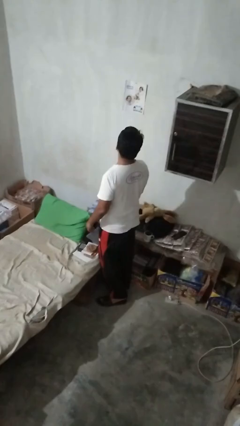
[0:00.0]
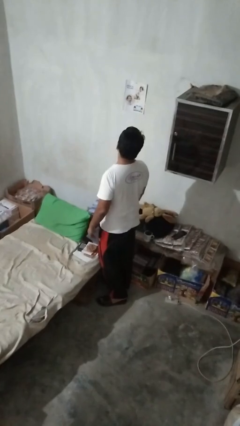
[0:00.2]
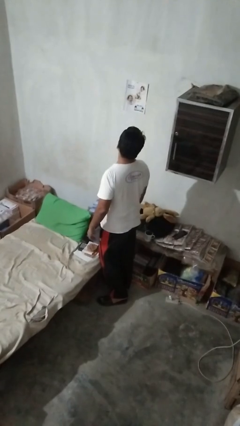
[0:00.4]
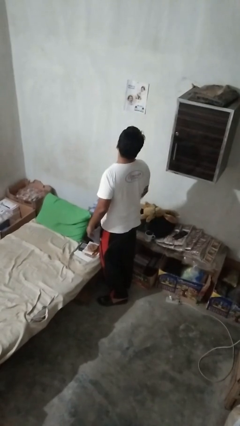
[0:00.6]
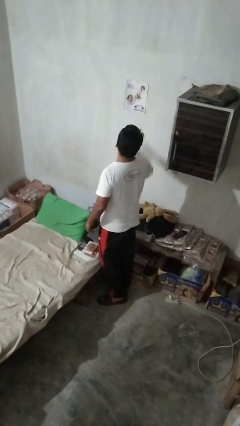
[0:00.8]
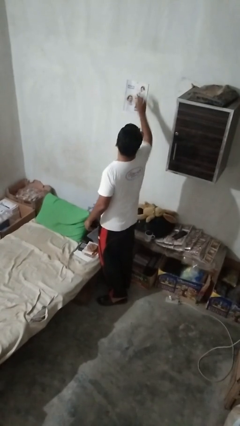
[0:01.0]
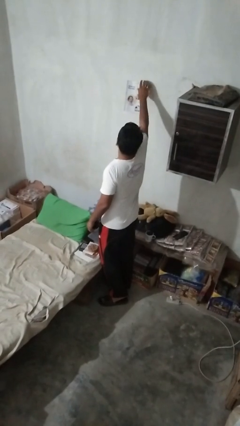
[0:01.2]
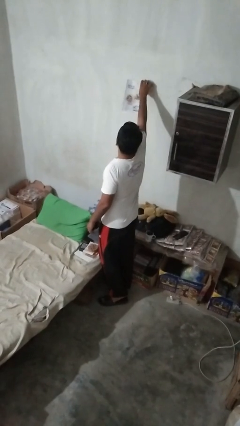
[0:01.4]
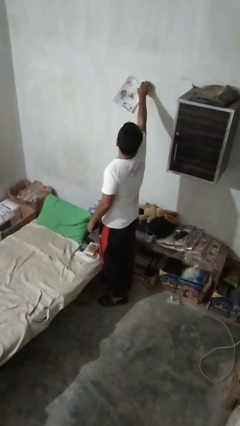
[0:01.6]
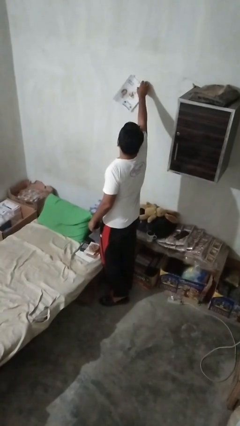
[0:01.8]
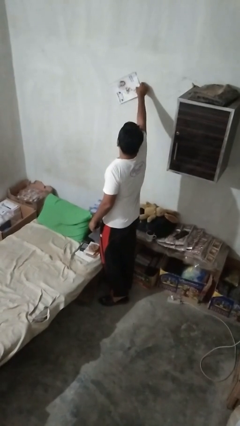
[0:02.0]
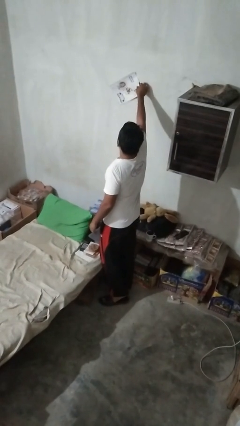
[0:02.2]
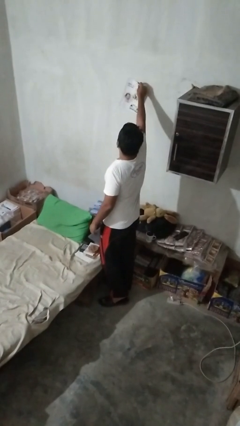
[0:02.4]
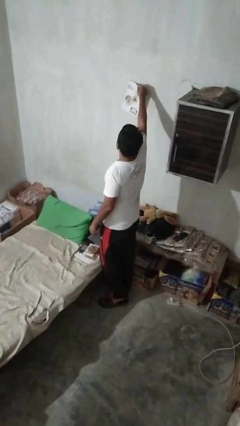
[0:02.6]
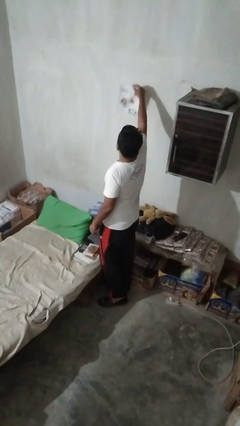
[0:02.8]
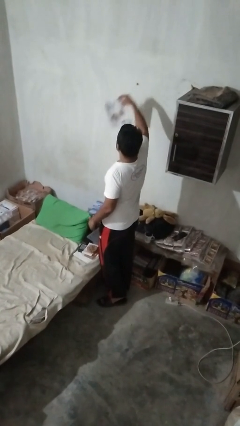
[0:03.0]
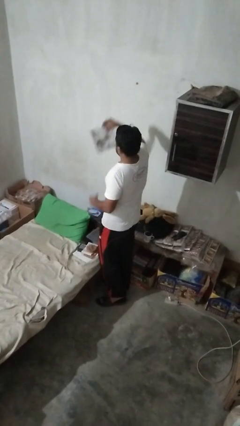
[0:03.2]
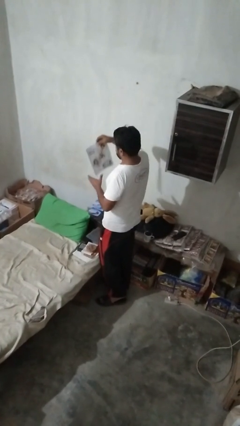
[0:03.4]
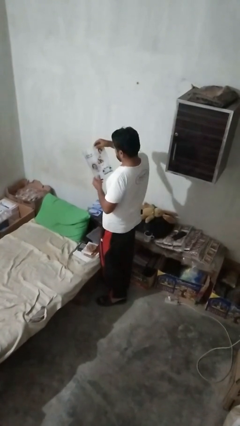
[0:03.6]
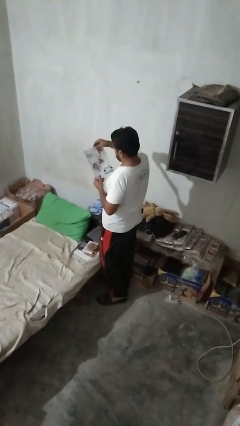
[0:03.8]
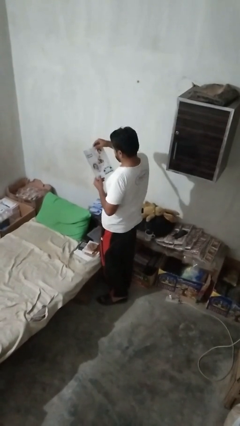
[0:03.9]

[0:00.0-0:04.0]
person takes down picture frame

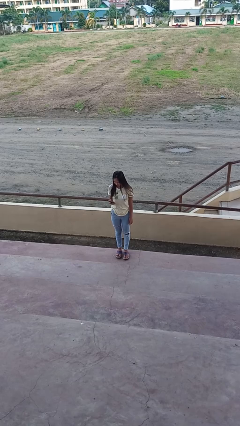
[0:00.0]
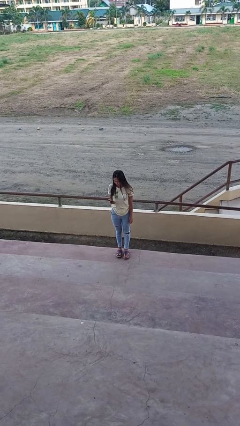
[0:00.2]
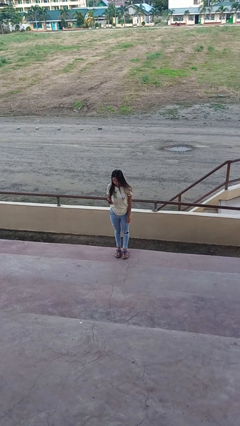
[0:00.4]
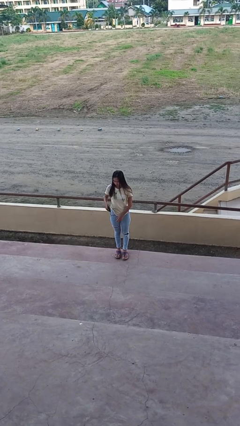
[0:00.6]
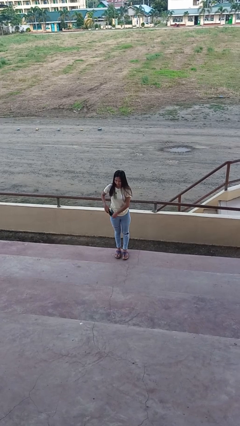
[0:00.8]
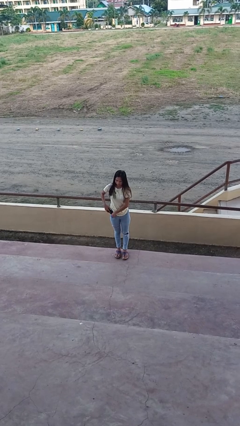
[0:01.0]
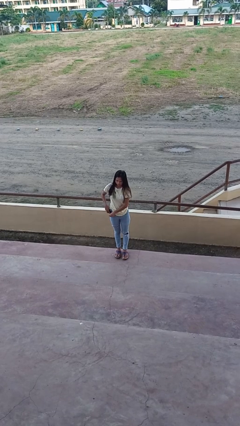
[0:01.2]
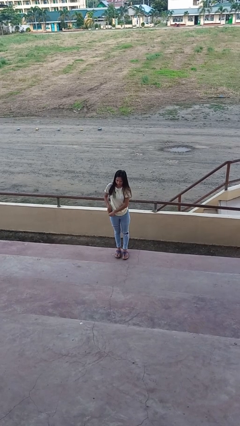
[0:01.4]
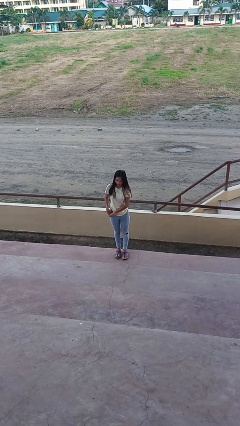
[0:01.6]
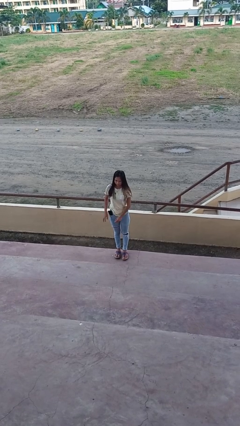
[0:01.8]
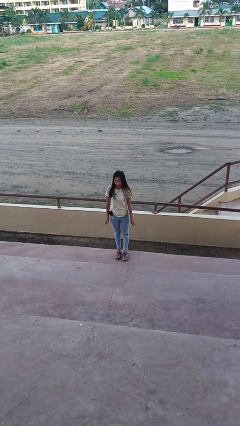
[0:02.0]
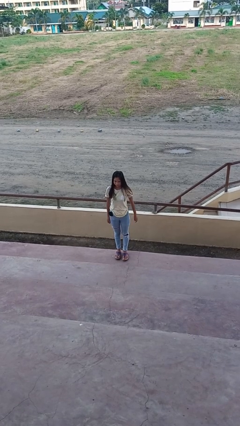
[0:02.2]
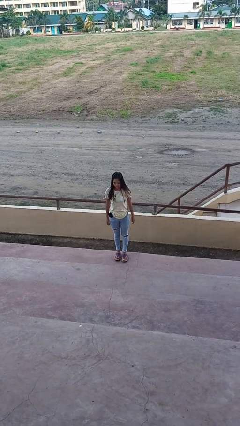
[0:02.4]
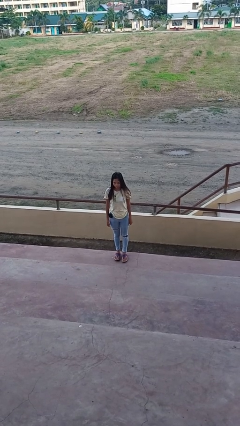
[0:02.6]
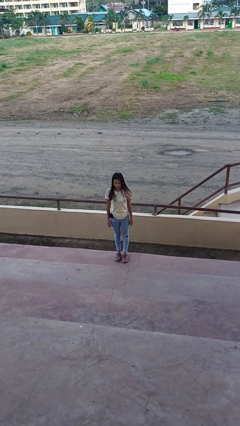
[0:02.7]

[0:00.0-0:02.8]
person puts phone into pocket

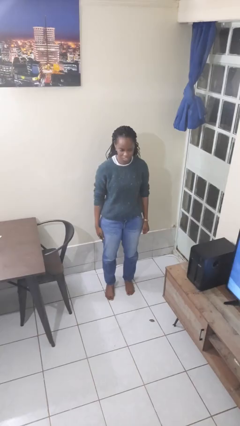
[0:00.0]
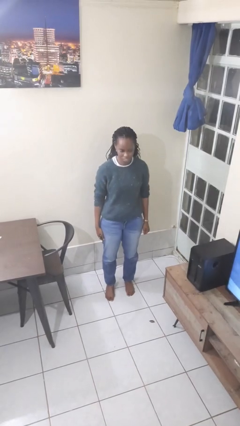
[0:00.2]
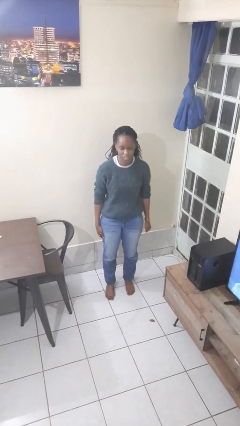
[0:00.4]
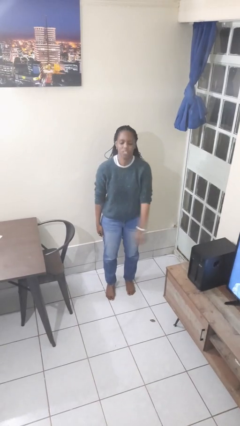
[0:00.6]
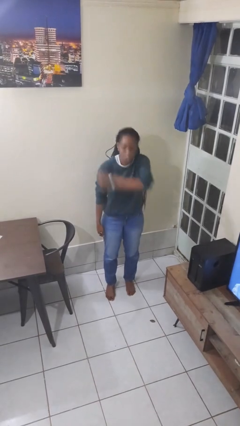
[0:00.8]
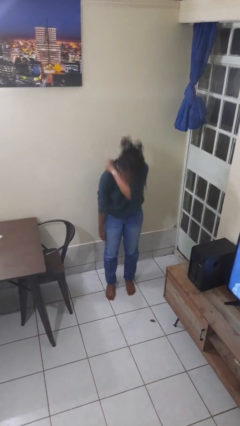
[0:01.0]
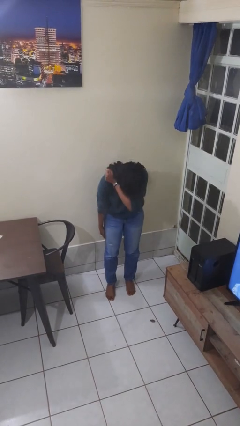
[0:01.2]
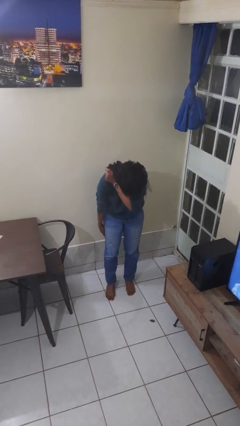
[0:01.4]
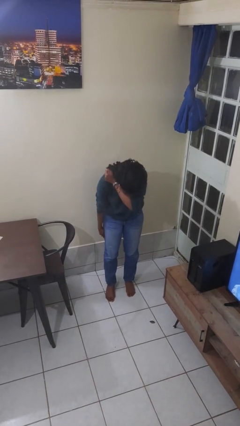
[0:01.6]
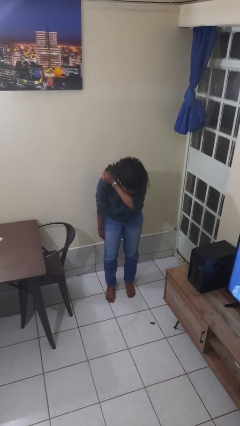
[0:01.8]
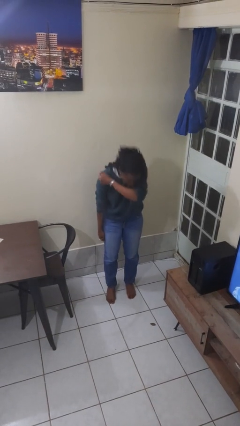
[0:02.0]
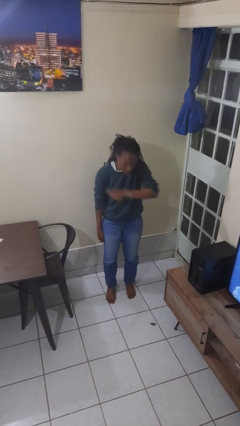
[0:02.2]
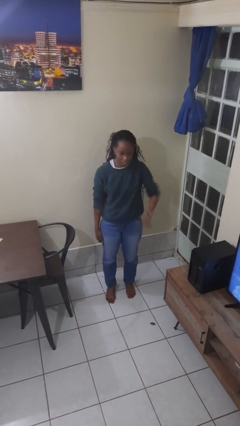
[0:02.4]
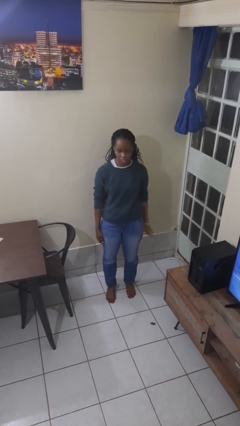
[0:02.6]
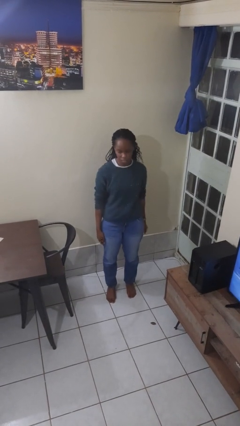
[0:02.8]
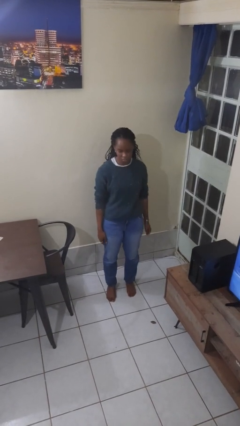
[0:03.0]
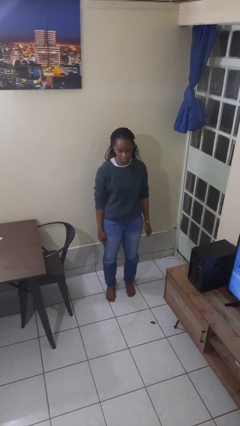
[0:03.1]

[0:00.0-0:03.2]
person sneezes into arm

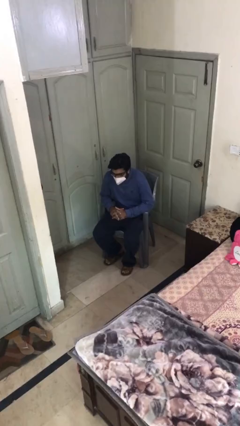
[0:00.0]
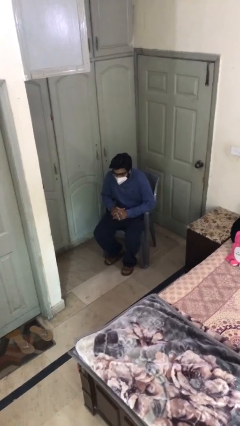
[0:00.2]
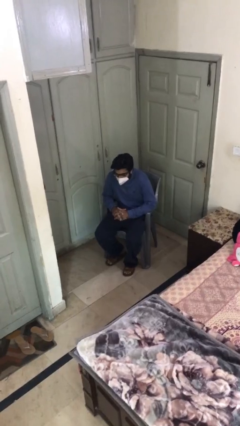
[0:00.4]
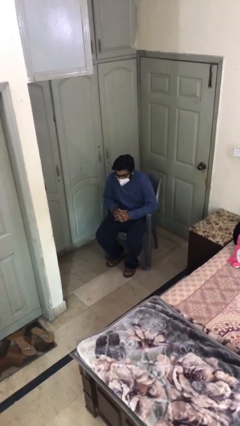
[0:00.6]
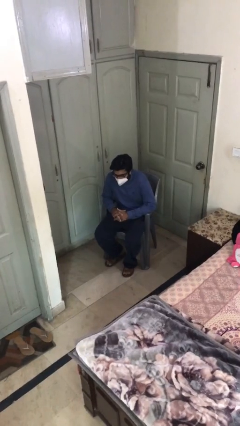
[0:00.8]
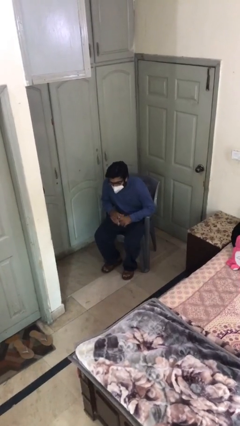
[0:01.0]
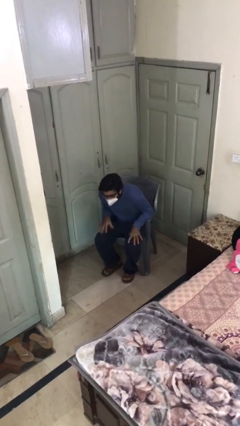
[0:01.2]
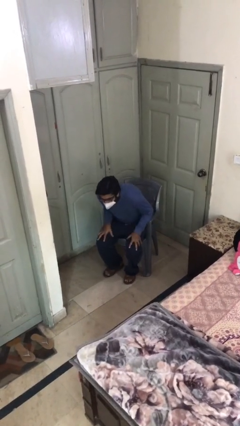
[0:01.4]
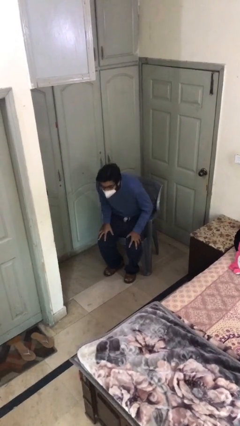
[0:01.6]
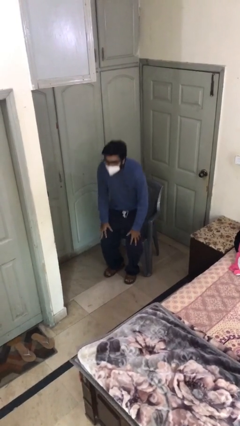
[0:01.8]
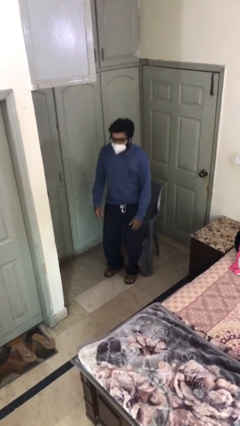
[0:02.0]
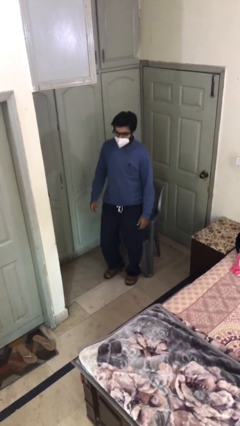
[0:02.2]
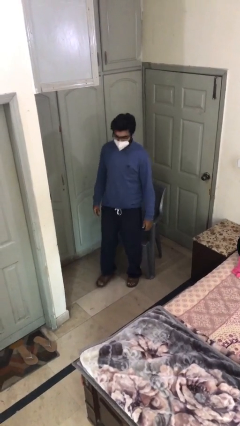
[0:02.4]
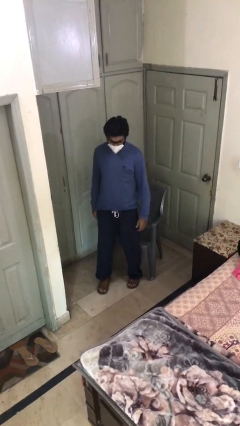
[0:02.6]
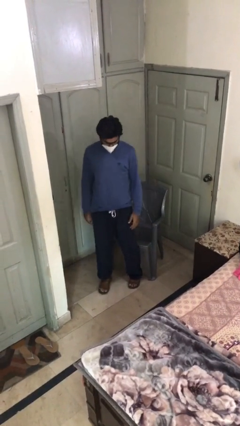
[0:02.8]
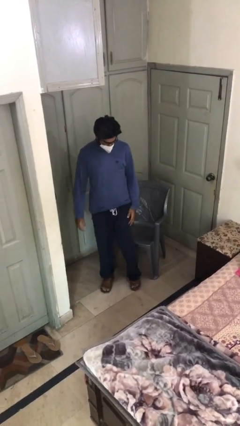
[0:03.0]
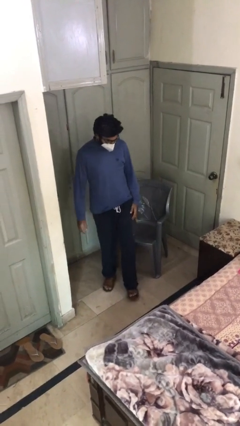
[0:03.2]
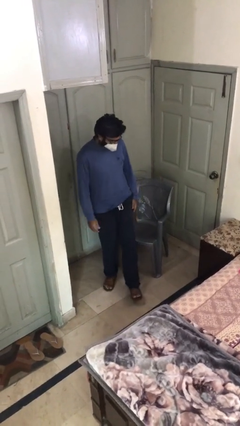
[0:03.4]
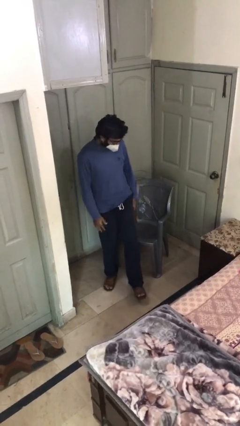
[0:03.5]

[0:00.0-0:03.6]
person stands up

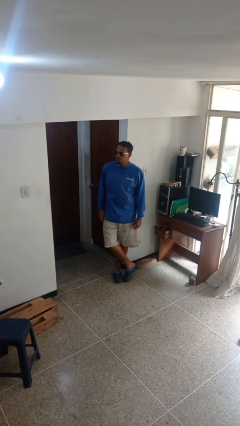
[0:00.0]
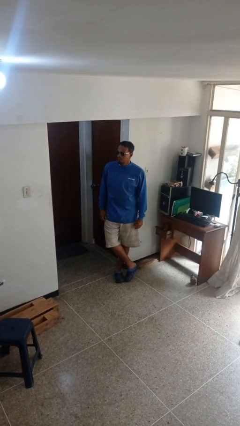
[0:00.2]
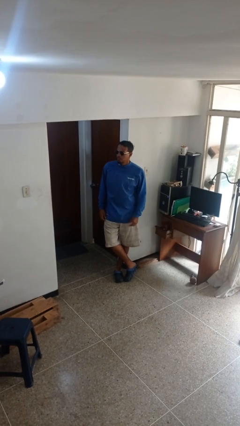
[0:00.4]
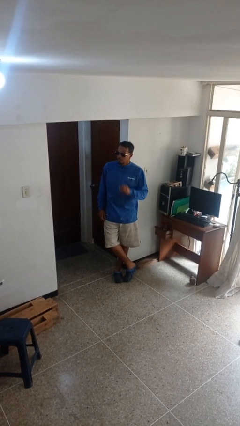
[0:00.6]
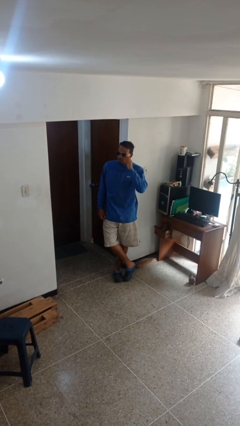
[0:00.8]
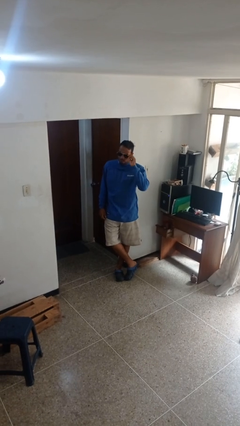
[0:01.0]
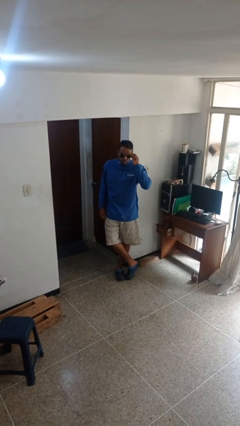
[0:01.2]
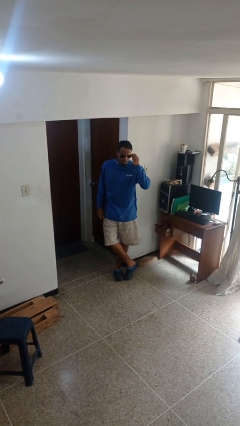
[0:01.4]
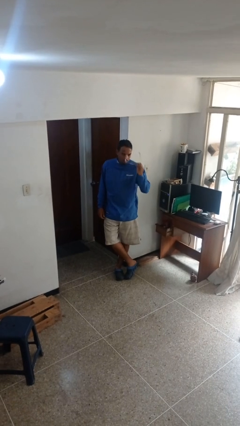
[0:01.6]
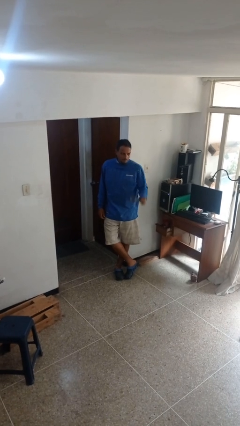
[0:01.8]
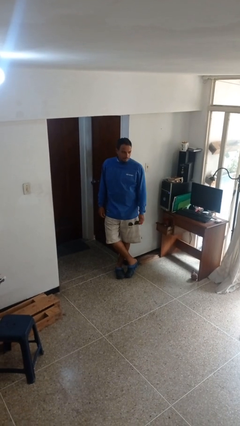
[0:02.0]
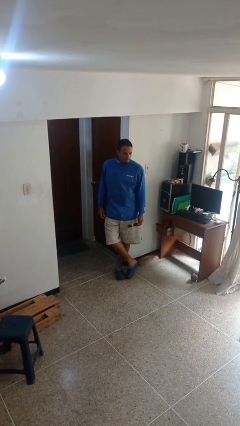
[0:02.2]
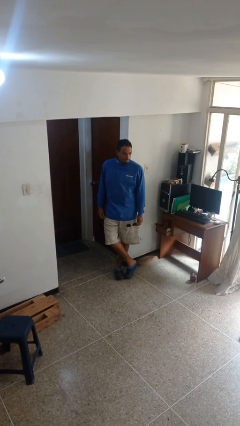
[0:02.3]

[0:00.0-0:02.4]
person takes off sunglasses

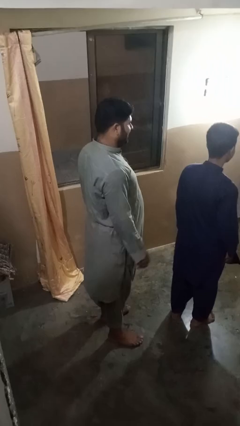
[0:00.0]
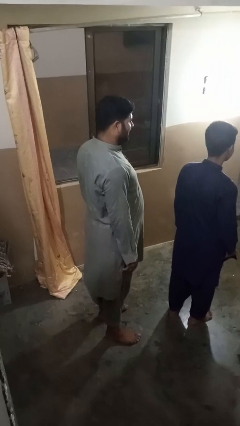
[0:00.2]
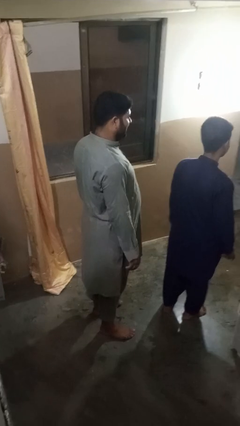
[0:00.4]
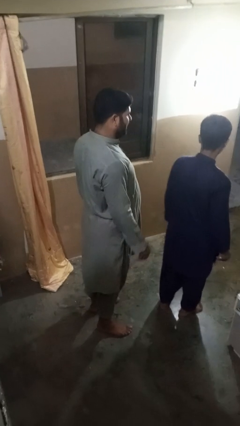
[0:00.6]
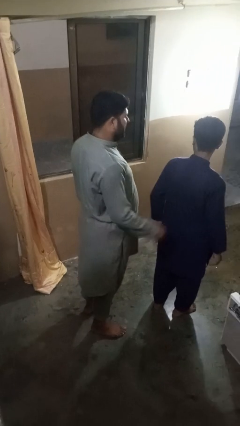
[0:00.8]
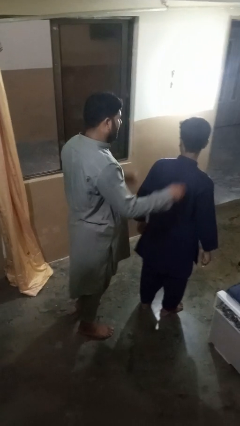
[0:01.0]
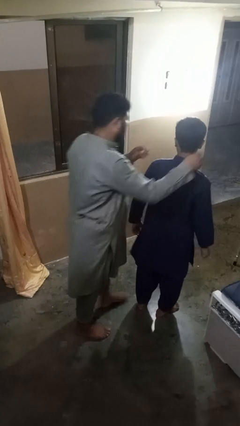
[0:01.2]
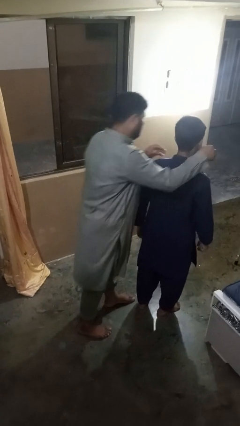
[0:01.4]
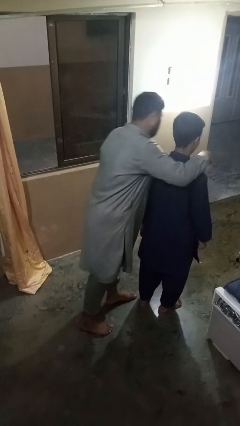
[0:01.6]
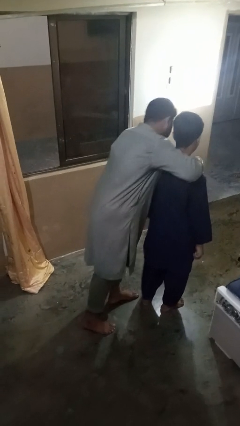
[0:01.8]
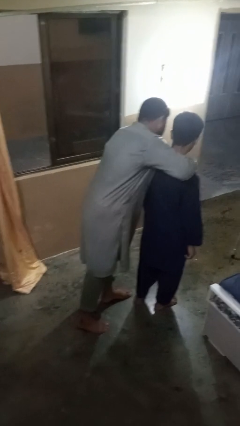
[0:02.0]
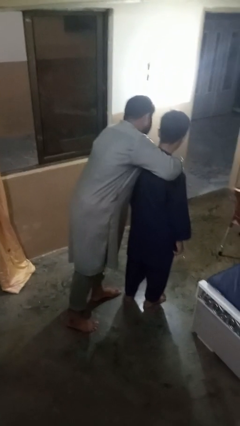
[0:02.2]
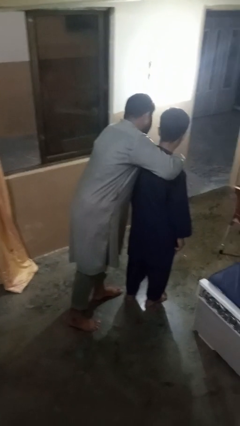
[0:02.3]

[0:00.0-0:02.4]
person hugs person from behind
